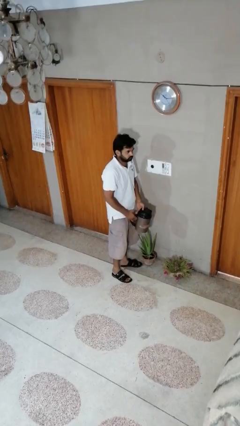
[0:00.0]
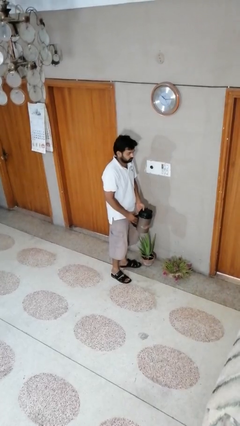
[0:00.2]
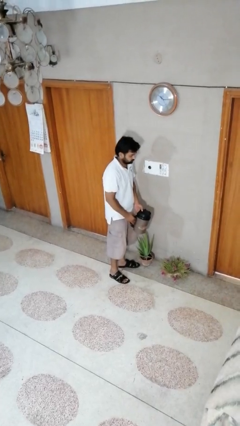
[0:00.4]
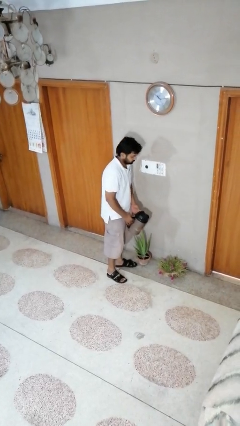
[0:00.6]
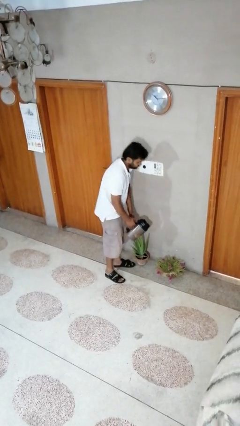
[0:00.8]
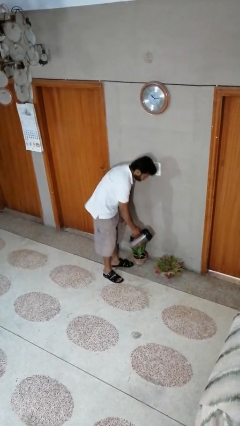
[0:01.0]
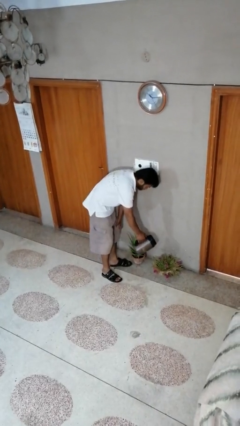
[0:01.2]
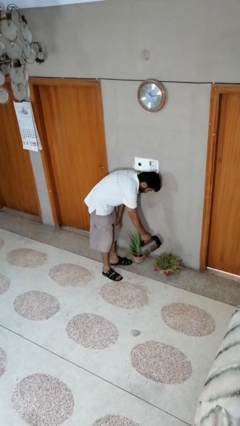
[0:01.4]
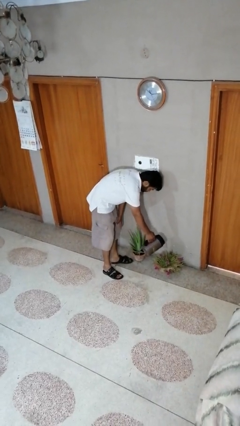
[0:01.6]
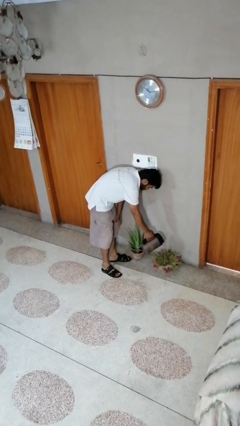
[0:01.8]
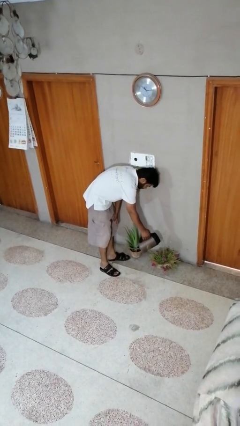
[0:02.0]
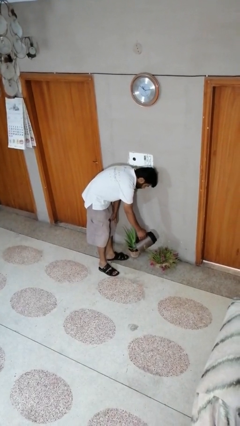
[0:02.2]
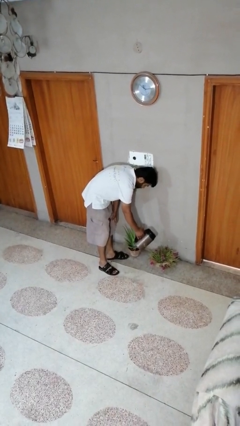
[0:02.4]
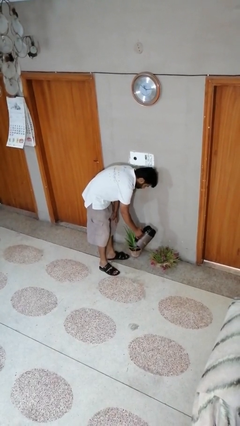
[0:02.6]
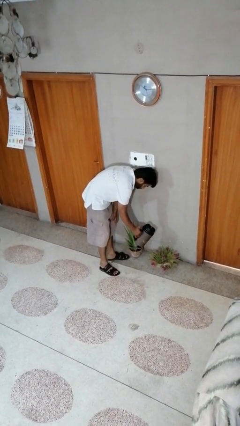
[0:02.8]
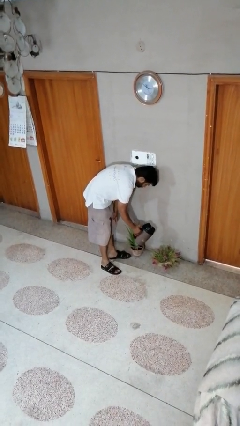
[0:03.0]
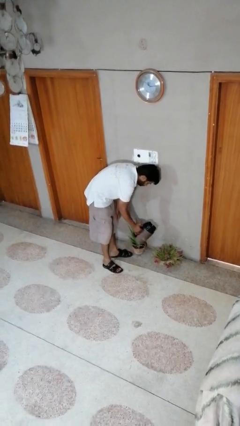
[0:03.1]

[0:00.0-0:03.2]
person waters houseplant

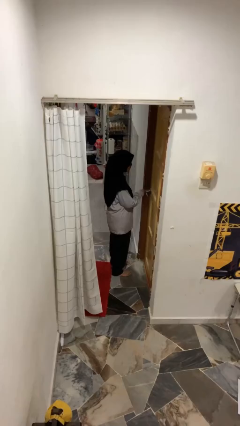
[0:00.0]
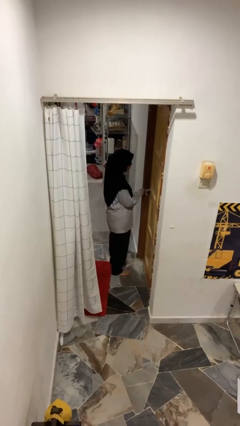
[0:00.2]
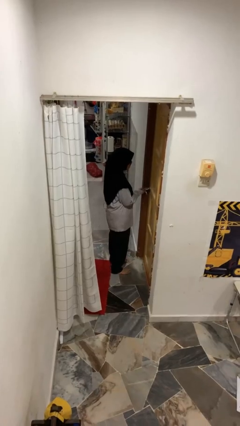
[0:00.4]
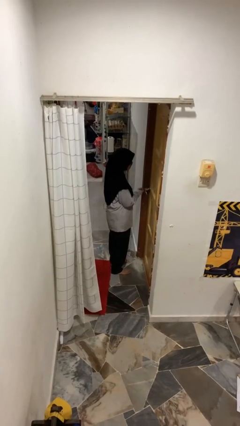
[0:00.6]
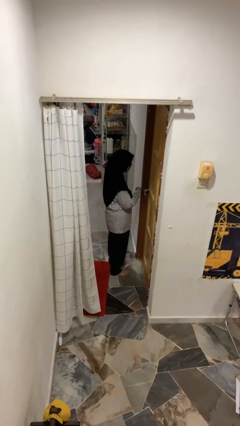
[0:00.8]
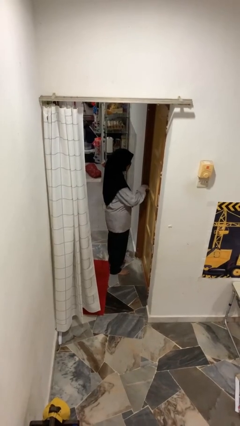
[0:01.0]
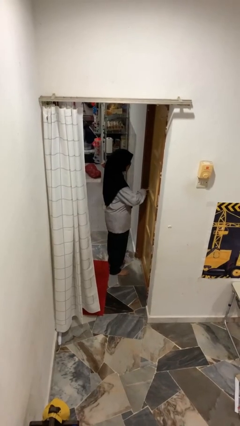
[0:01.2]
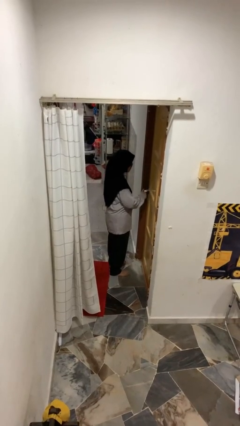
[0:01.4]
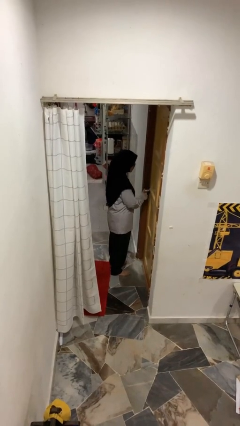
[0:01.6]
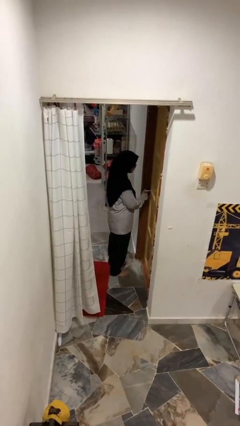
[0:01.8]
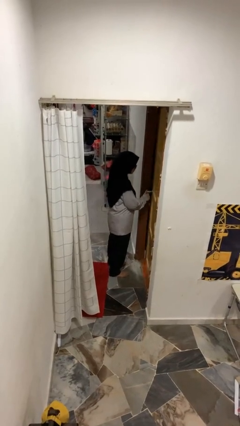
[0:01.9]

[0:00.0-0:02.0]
person unlocks door with keys

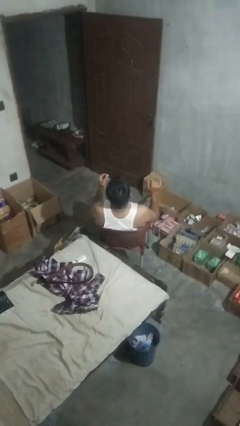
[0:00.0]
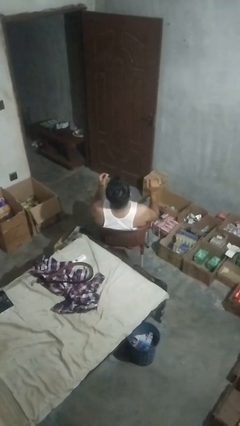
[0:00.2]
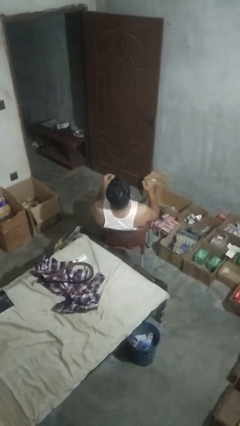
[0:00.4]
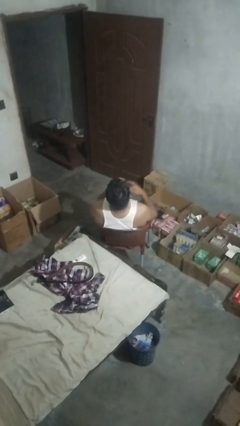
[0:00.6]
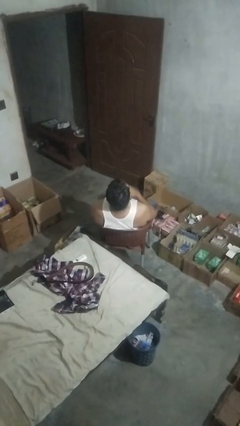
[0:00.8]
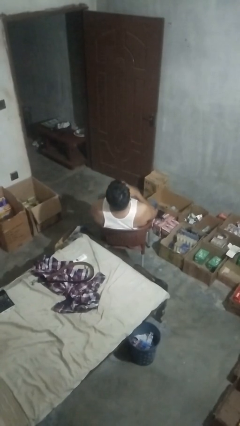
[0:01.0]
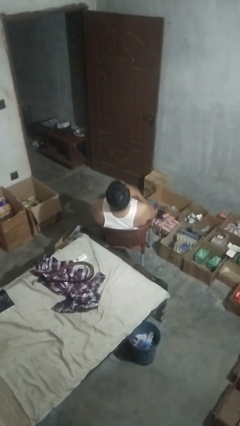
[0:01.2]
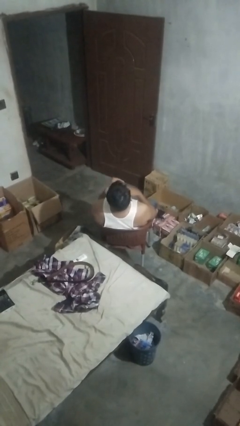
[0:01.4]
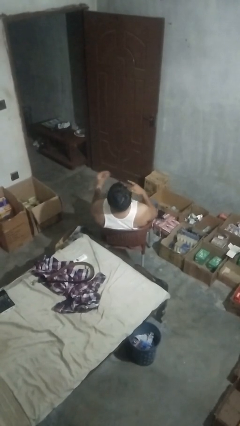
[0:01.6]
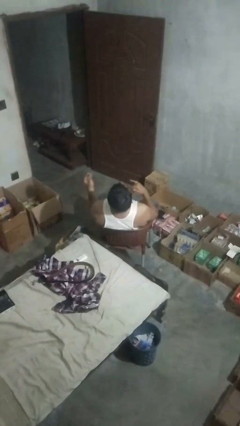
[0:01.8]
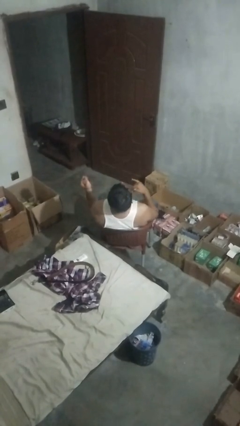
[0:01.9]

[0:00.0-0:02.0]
person takes off ring

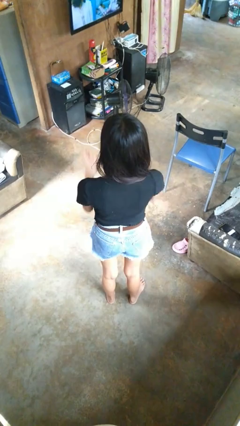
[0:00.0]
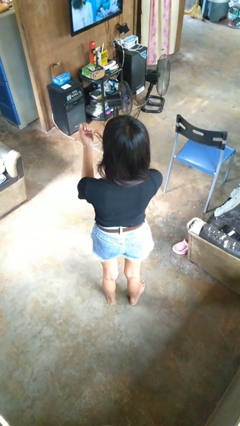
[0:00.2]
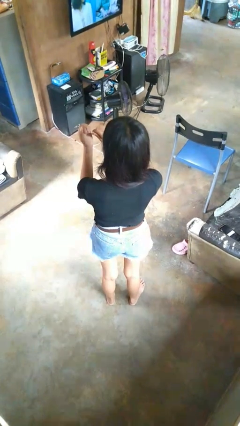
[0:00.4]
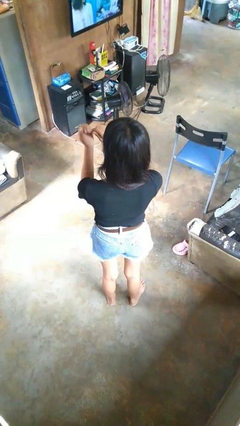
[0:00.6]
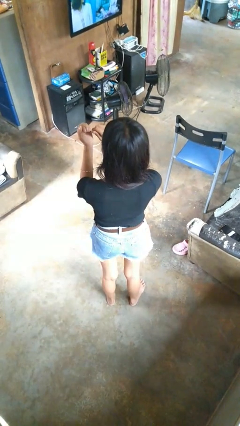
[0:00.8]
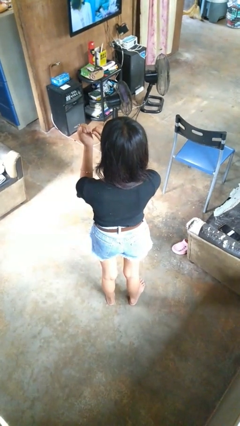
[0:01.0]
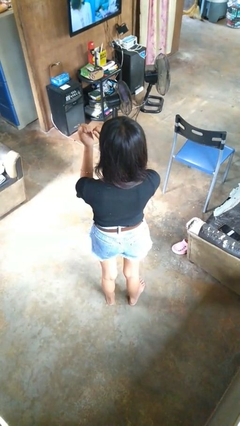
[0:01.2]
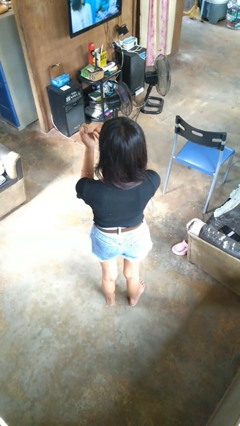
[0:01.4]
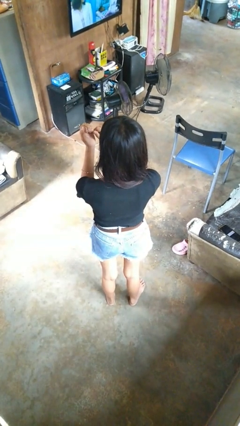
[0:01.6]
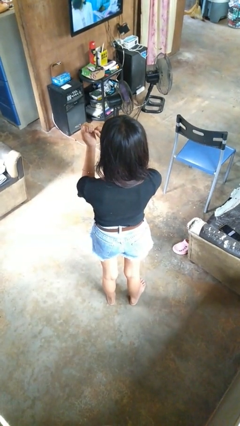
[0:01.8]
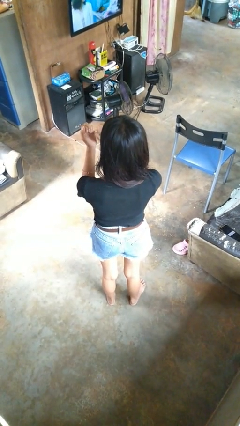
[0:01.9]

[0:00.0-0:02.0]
person files fingernails

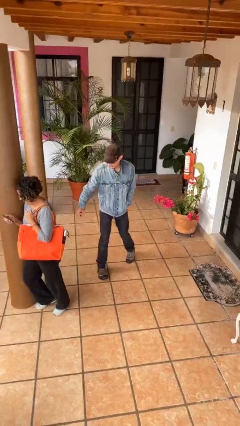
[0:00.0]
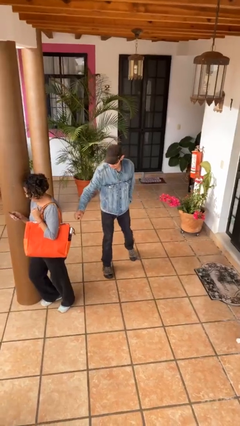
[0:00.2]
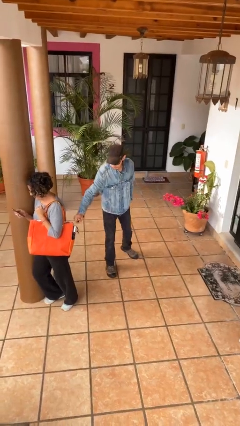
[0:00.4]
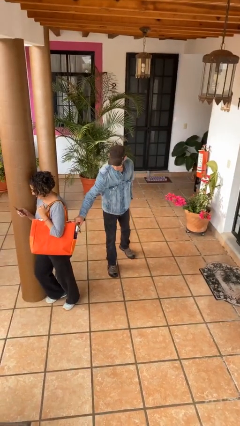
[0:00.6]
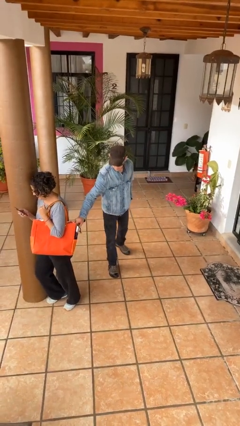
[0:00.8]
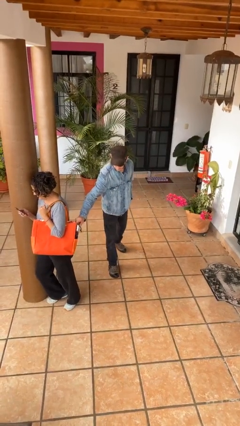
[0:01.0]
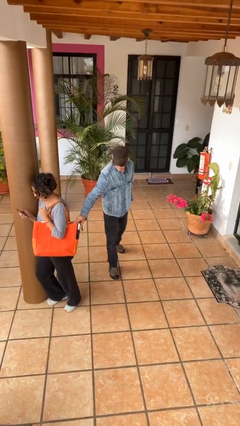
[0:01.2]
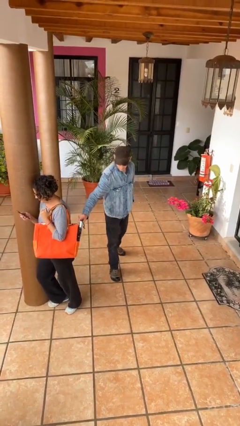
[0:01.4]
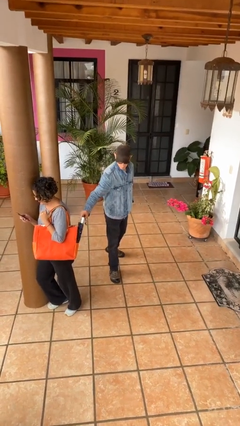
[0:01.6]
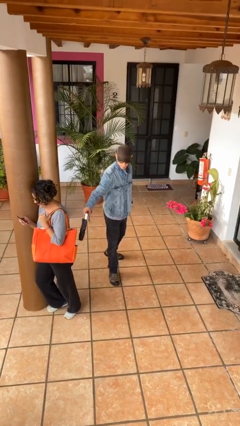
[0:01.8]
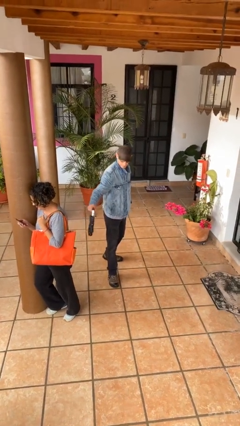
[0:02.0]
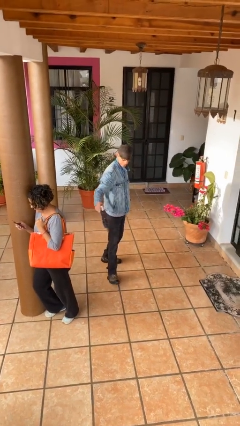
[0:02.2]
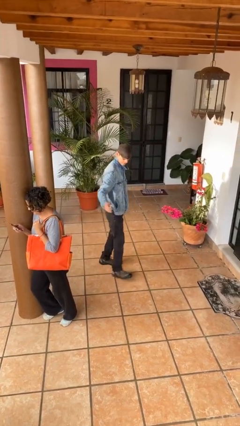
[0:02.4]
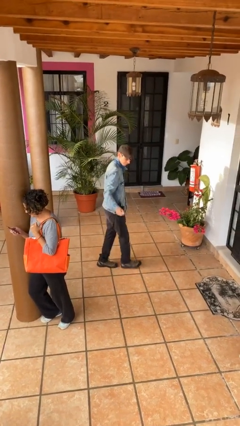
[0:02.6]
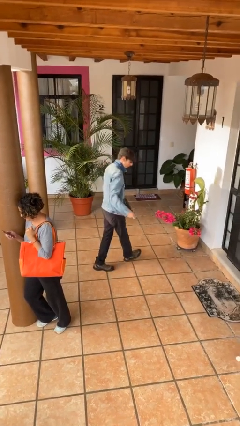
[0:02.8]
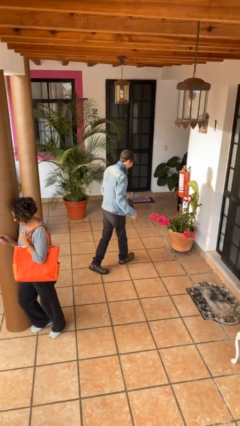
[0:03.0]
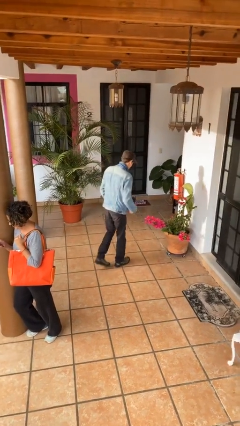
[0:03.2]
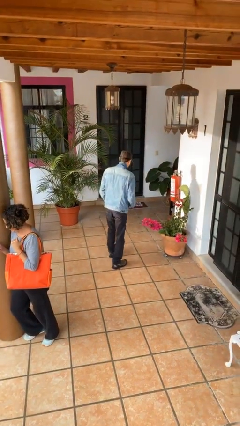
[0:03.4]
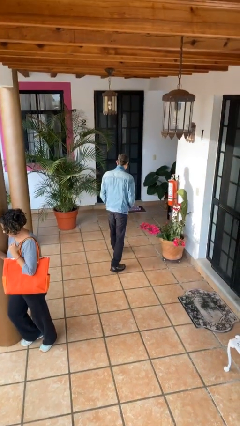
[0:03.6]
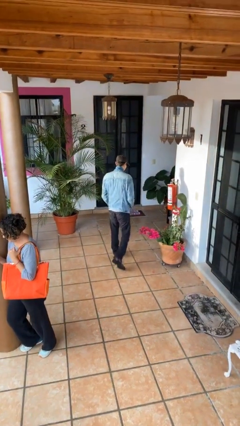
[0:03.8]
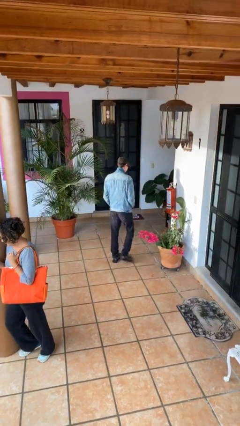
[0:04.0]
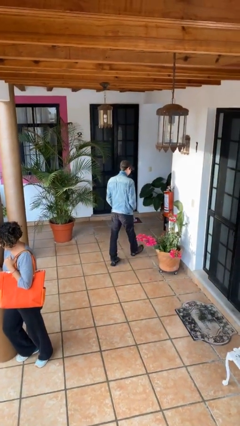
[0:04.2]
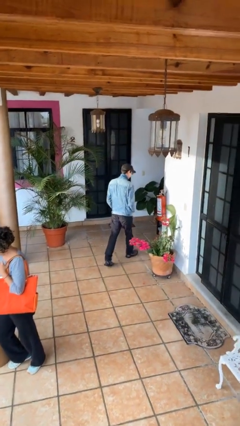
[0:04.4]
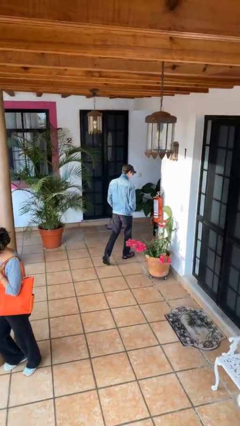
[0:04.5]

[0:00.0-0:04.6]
person steals object from person

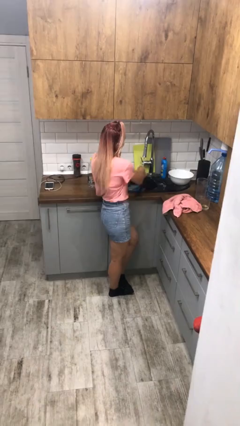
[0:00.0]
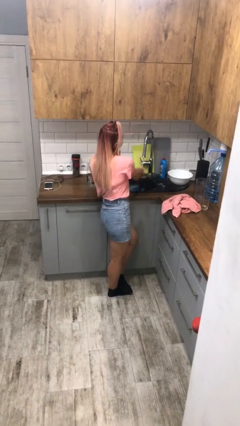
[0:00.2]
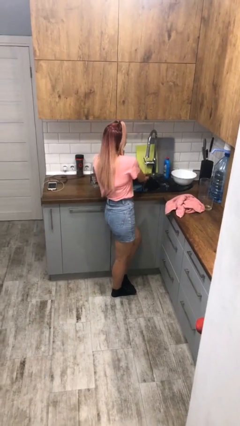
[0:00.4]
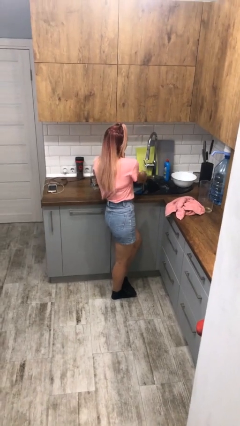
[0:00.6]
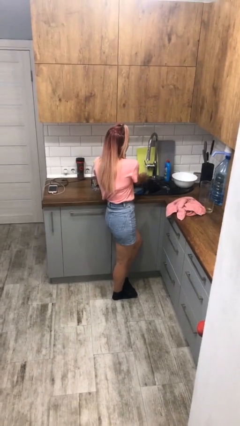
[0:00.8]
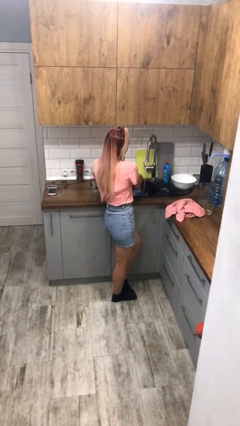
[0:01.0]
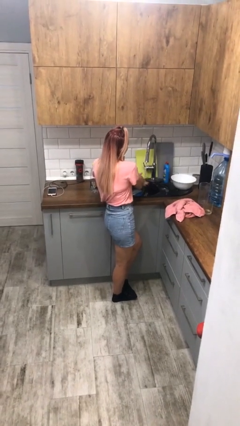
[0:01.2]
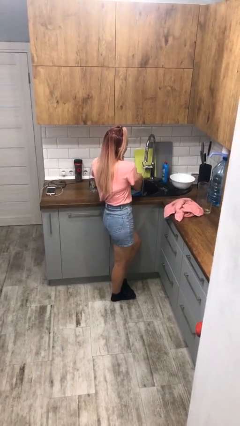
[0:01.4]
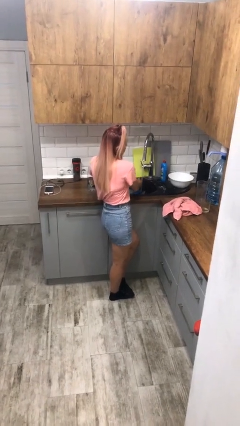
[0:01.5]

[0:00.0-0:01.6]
person washes hands

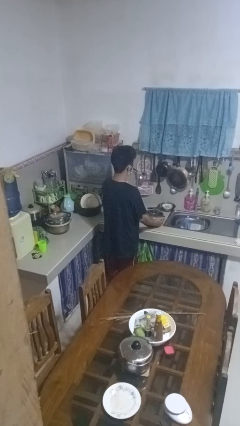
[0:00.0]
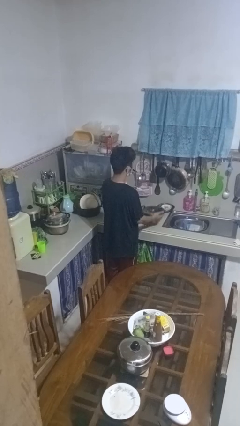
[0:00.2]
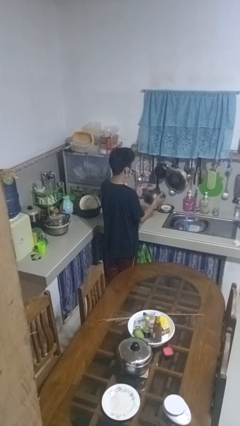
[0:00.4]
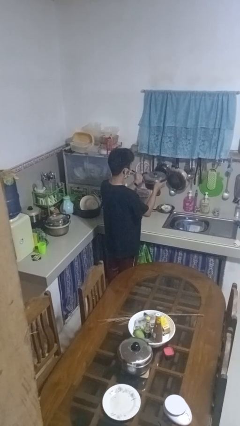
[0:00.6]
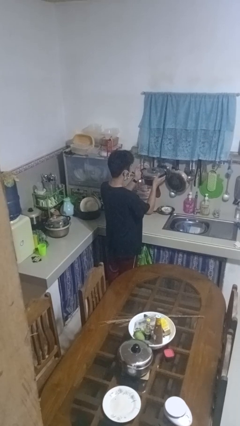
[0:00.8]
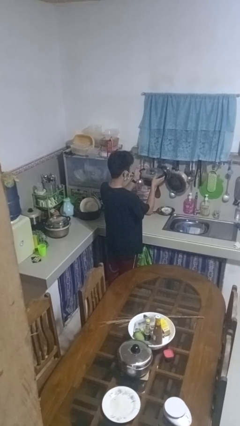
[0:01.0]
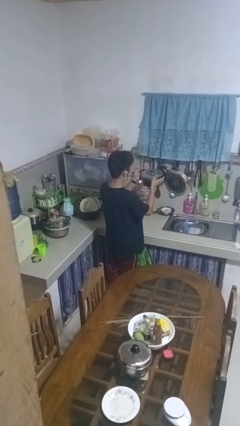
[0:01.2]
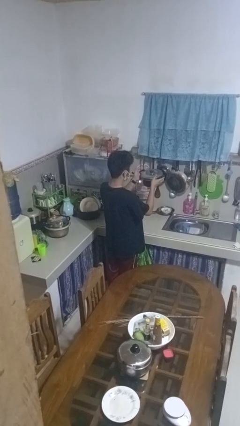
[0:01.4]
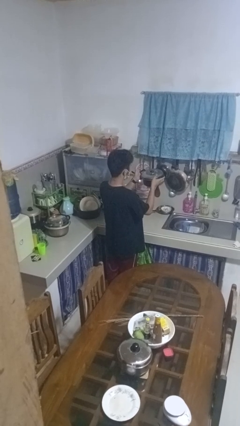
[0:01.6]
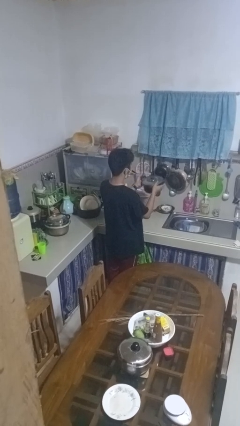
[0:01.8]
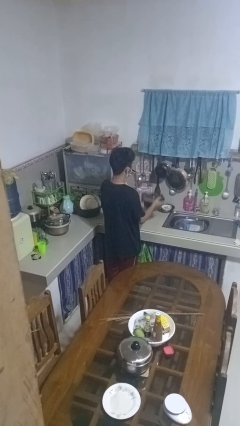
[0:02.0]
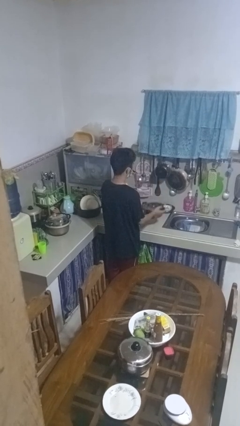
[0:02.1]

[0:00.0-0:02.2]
person picks up object from countertop
